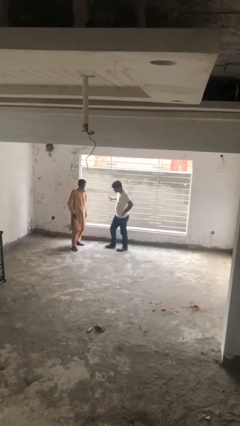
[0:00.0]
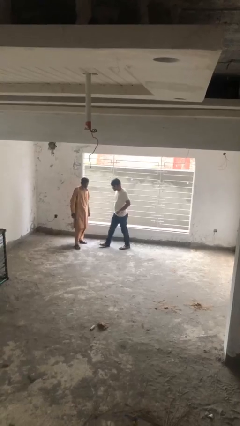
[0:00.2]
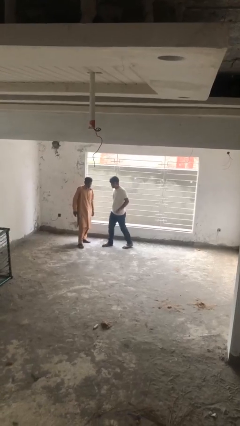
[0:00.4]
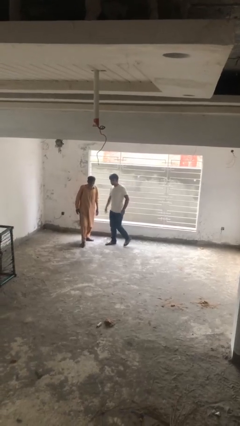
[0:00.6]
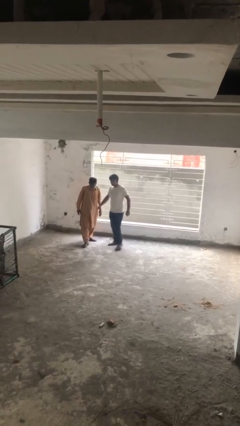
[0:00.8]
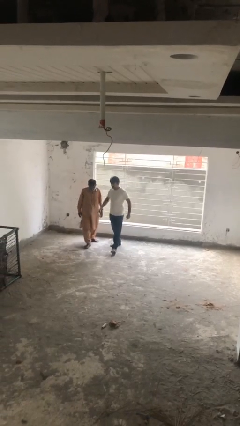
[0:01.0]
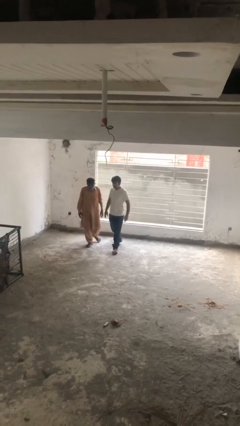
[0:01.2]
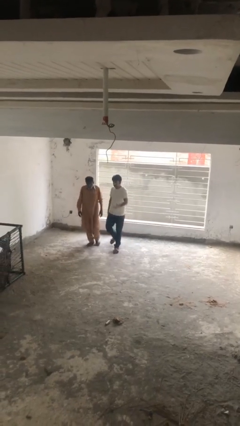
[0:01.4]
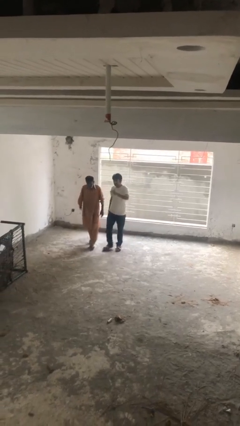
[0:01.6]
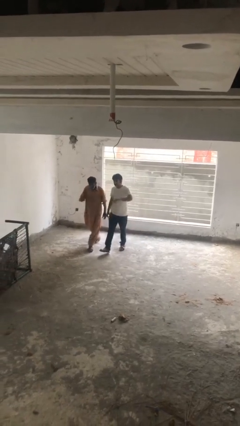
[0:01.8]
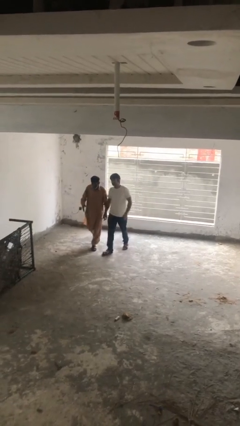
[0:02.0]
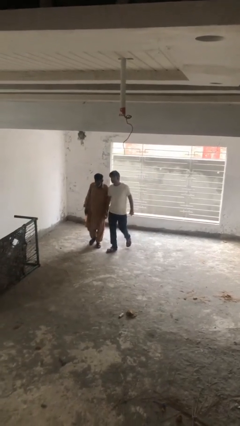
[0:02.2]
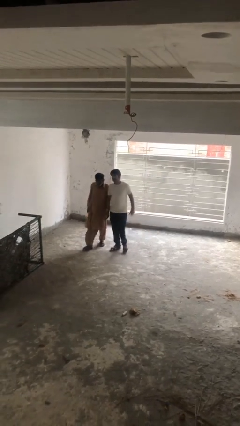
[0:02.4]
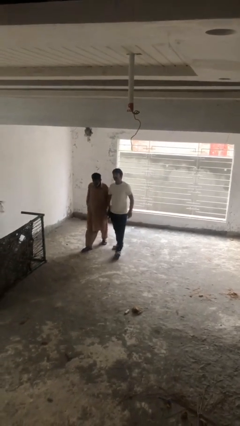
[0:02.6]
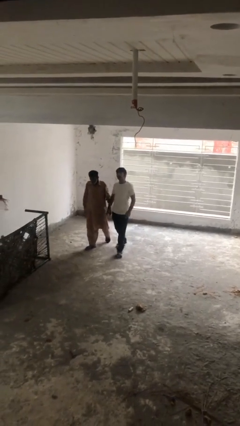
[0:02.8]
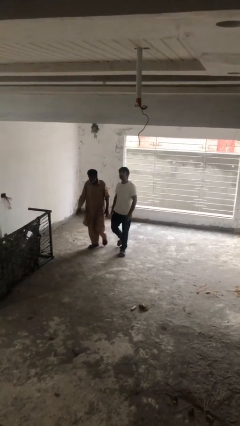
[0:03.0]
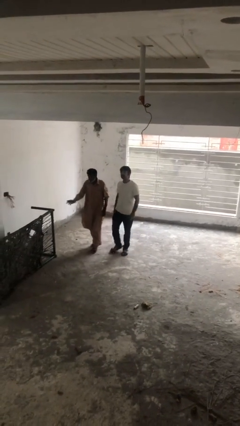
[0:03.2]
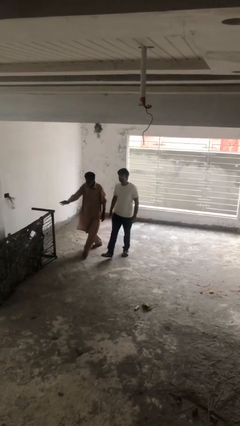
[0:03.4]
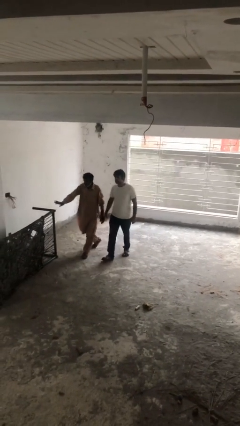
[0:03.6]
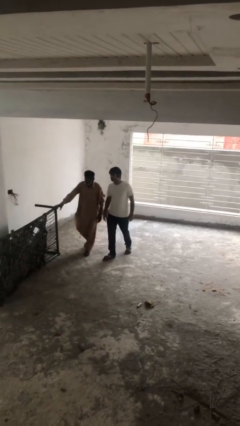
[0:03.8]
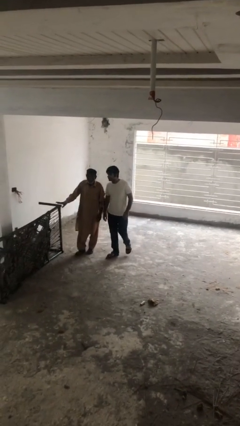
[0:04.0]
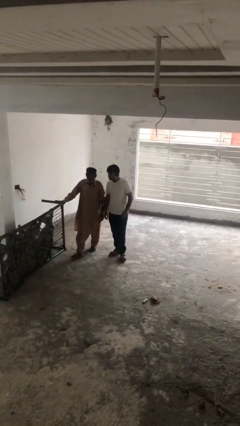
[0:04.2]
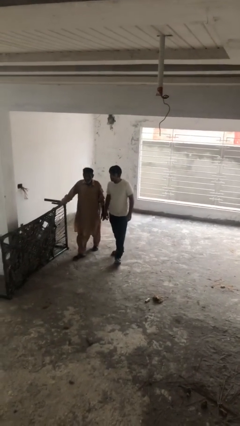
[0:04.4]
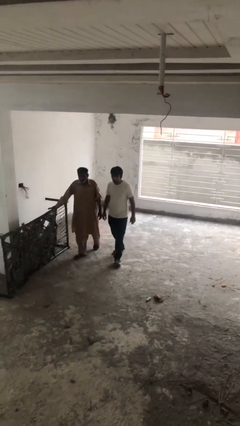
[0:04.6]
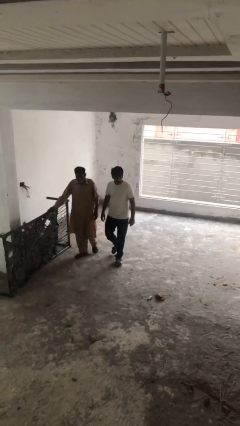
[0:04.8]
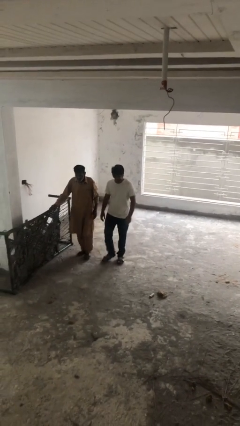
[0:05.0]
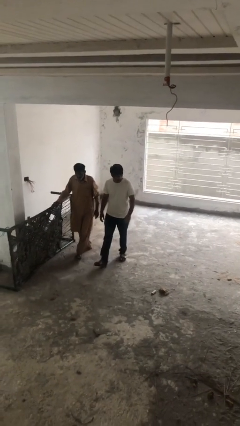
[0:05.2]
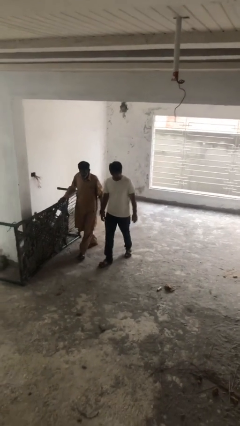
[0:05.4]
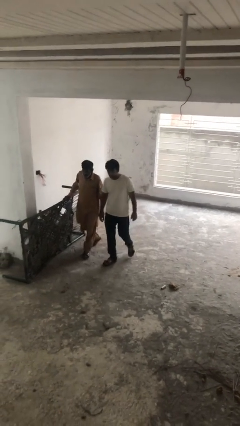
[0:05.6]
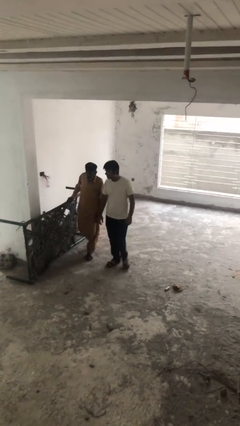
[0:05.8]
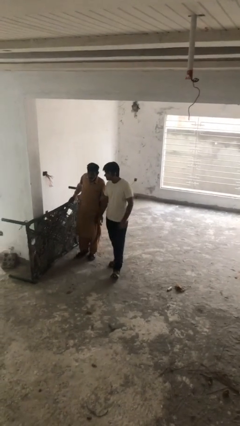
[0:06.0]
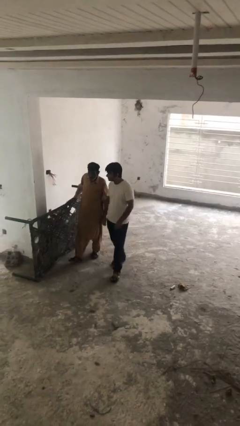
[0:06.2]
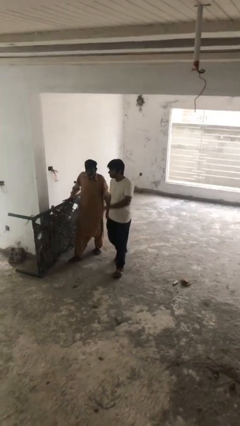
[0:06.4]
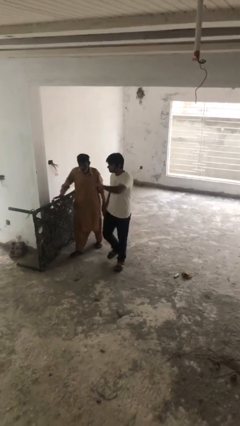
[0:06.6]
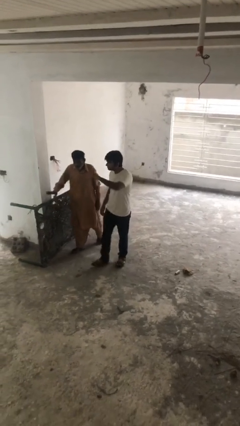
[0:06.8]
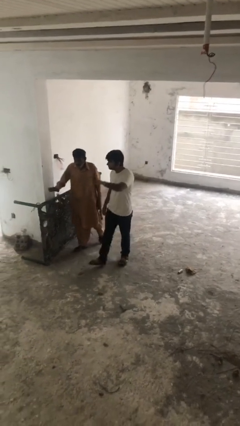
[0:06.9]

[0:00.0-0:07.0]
person talks to person

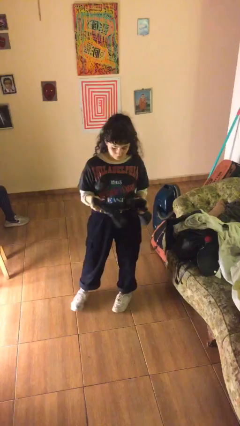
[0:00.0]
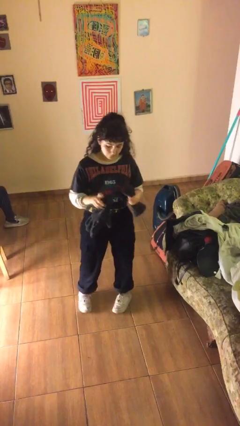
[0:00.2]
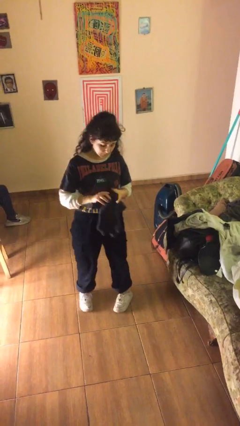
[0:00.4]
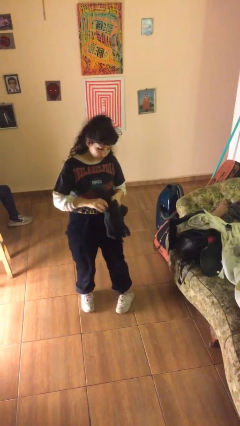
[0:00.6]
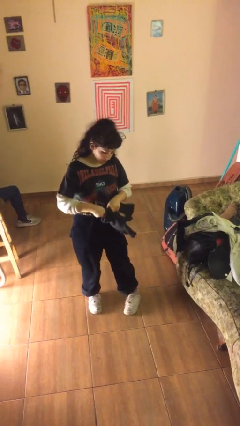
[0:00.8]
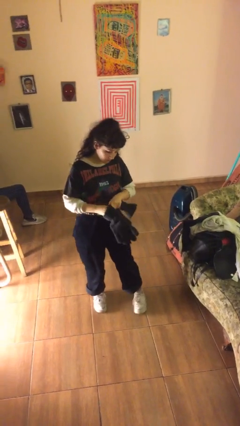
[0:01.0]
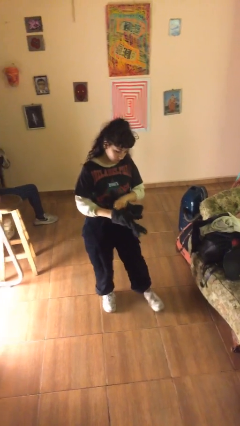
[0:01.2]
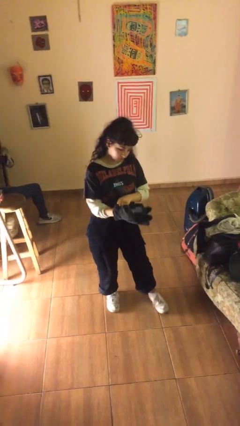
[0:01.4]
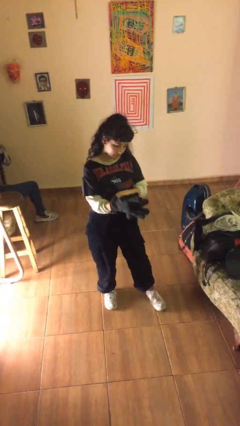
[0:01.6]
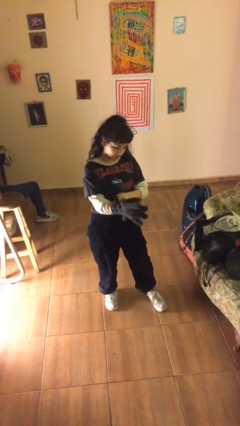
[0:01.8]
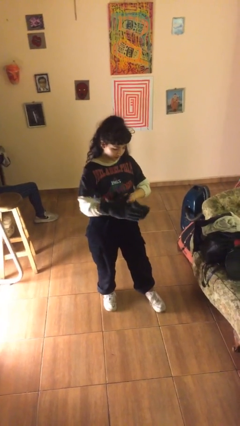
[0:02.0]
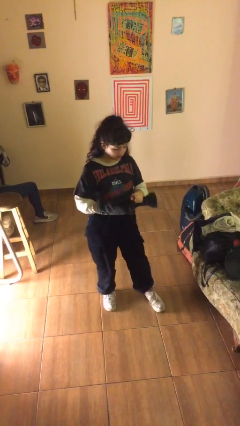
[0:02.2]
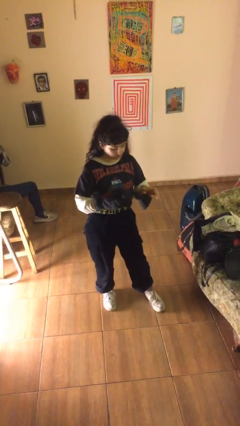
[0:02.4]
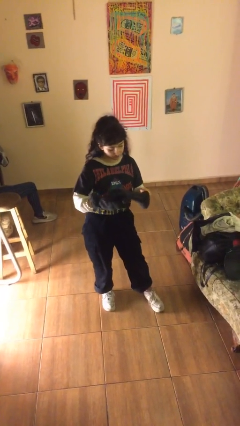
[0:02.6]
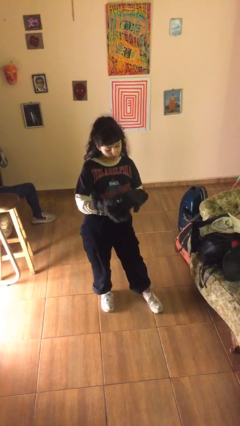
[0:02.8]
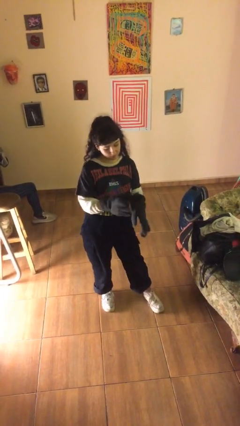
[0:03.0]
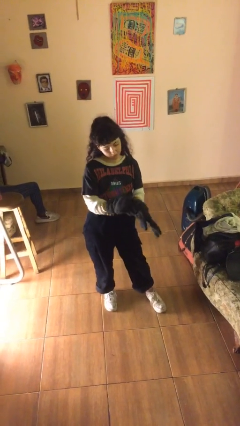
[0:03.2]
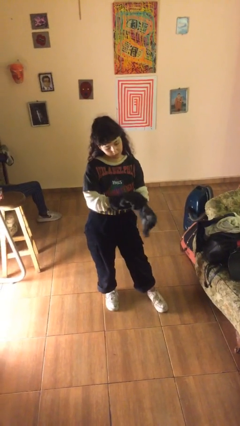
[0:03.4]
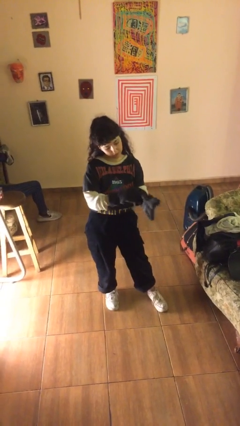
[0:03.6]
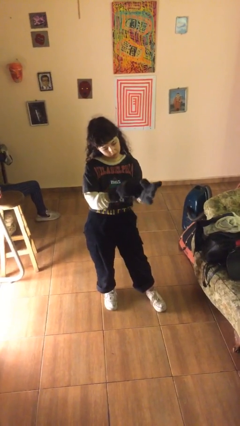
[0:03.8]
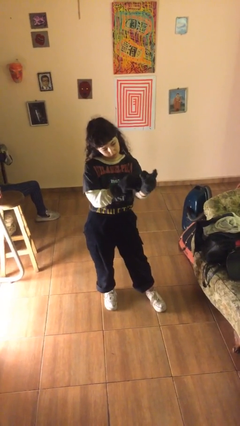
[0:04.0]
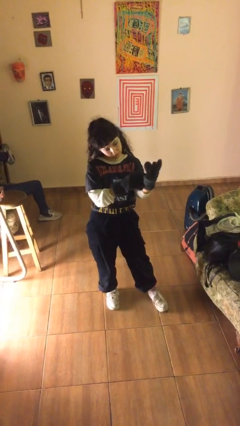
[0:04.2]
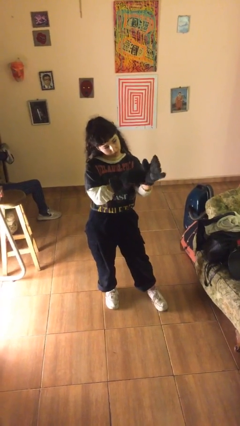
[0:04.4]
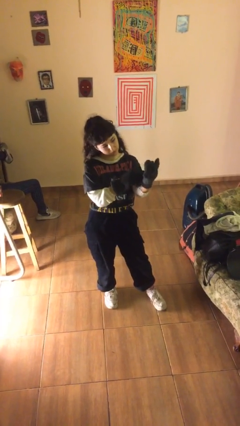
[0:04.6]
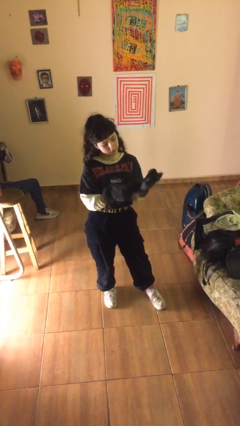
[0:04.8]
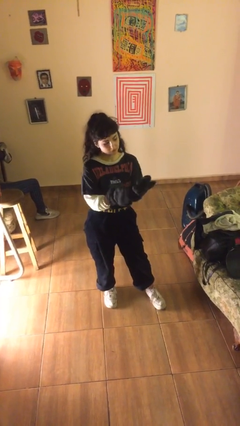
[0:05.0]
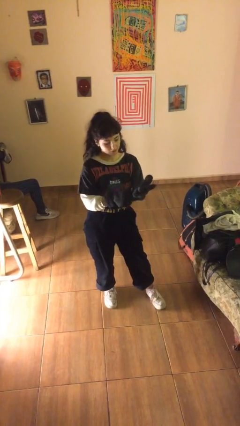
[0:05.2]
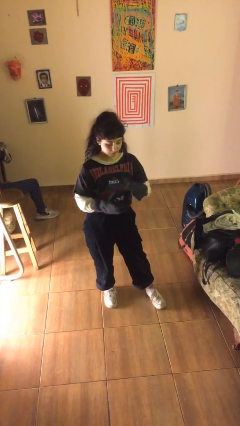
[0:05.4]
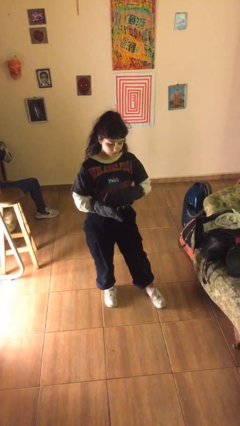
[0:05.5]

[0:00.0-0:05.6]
person puts on gloves

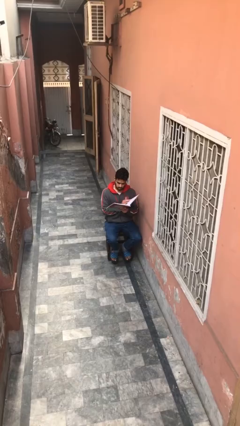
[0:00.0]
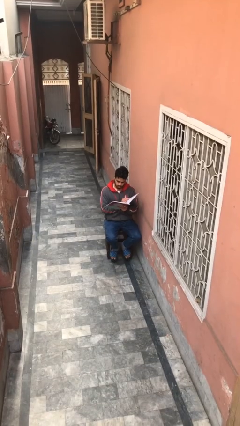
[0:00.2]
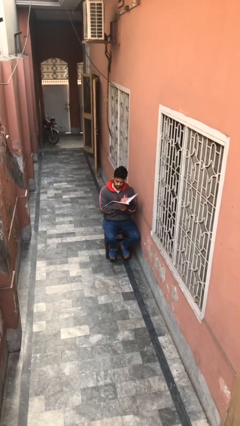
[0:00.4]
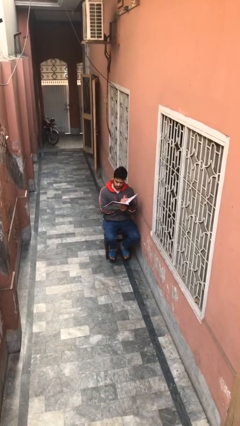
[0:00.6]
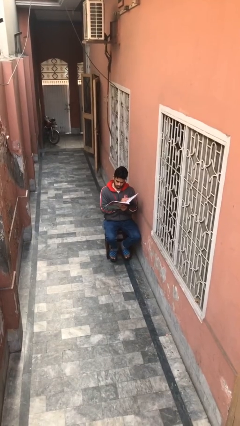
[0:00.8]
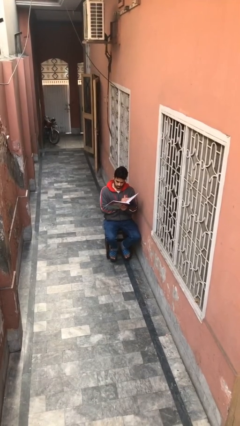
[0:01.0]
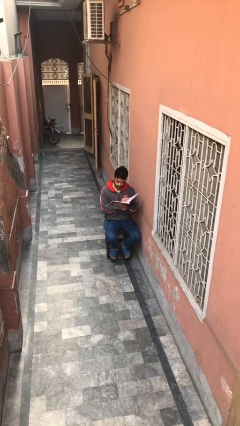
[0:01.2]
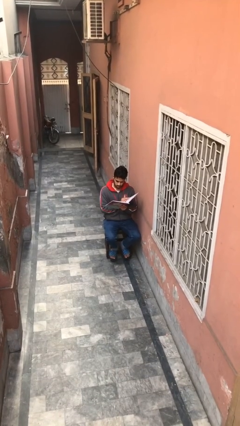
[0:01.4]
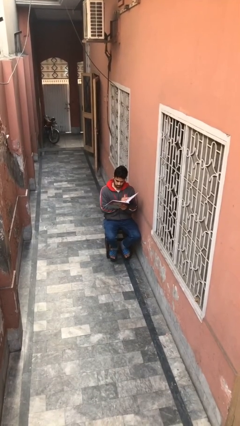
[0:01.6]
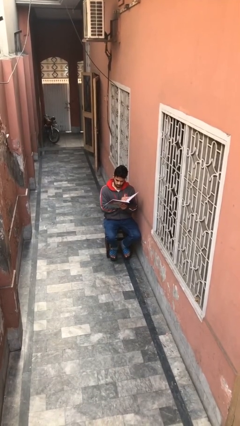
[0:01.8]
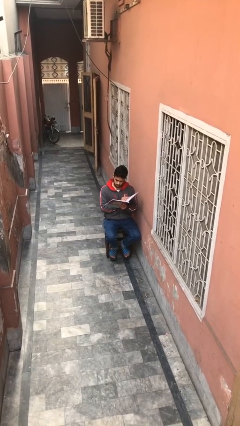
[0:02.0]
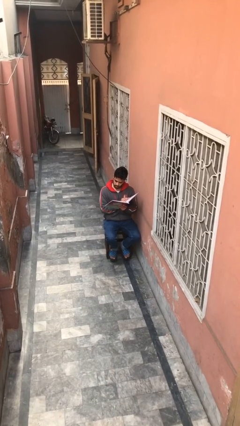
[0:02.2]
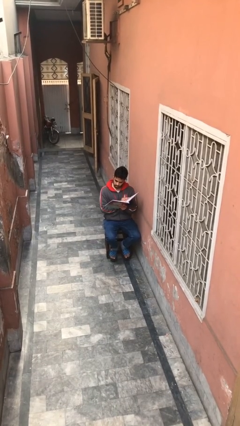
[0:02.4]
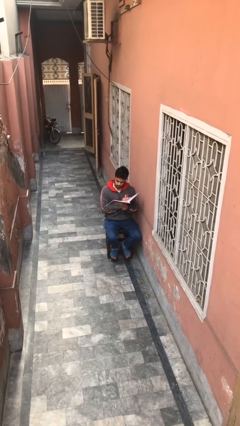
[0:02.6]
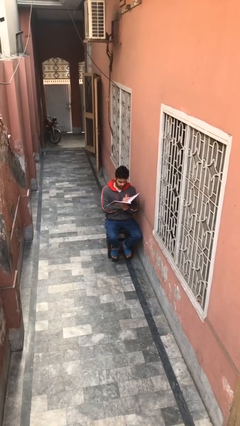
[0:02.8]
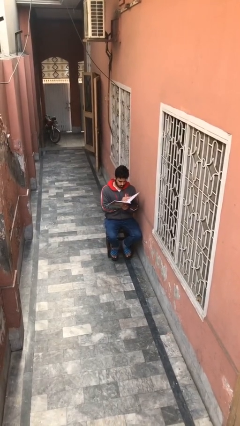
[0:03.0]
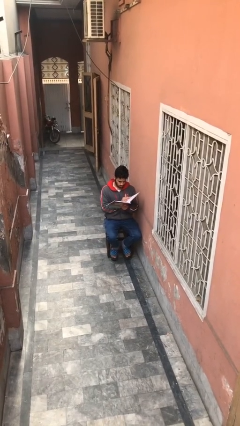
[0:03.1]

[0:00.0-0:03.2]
person reads document

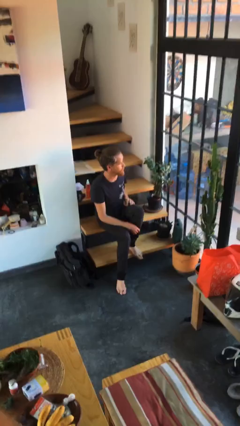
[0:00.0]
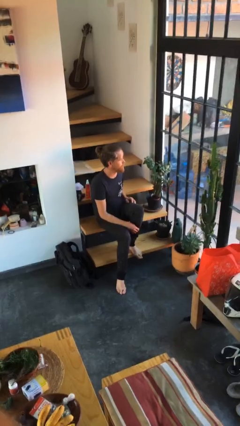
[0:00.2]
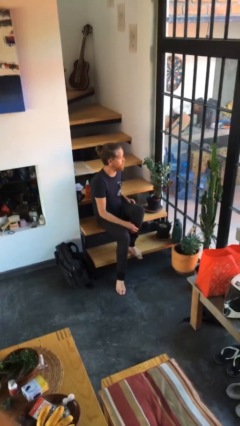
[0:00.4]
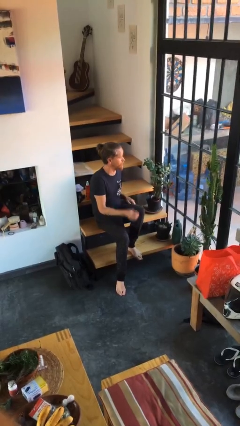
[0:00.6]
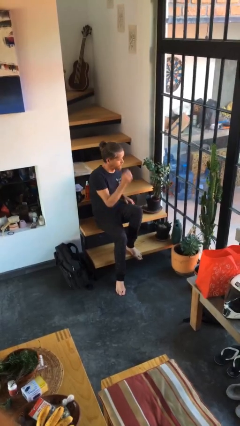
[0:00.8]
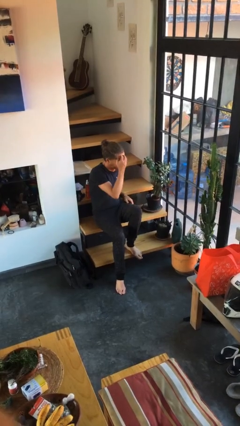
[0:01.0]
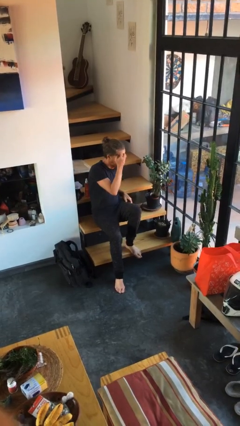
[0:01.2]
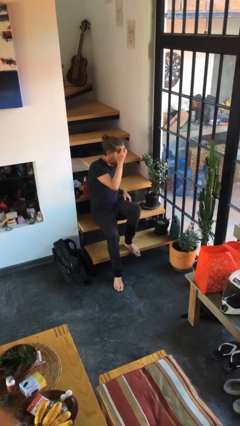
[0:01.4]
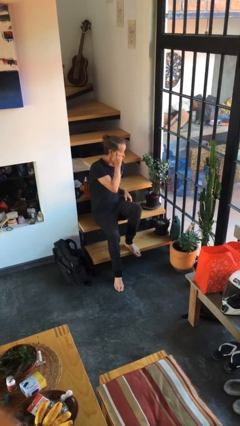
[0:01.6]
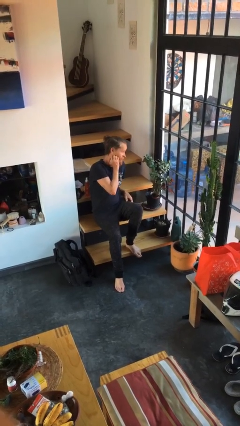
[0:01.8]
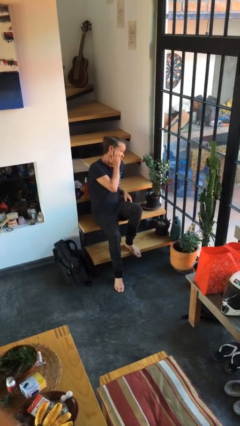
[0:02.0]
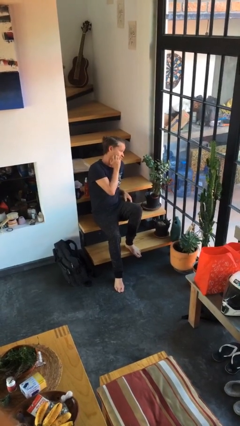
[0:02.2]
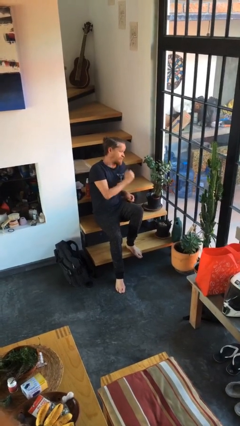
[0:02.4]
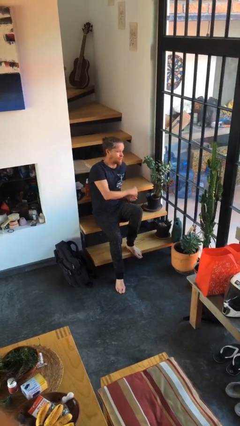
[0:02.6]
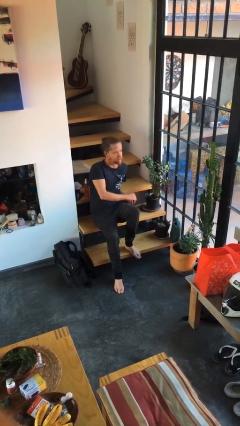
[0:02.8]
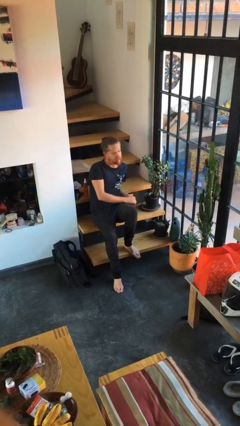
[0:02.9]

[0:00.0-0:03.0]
person scratches face
